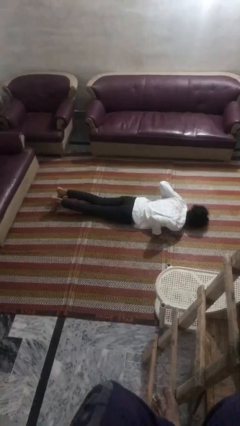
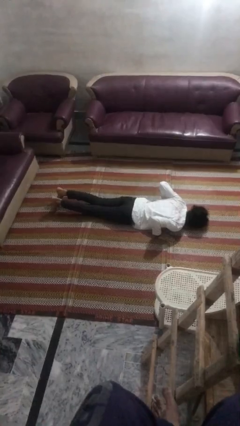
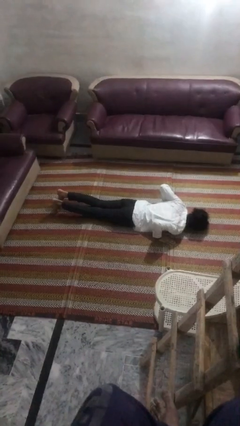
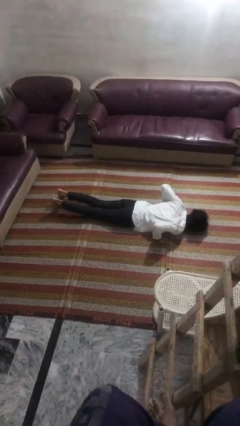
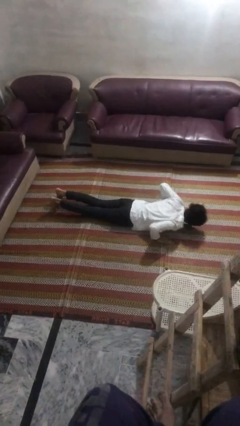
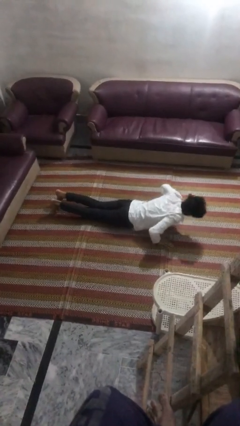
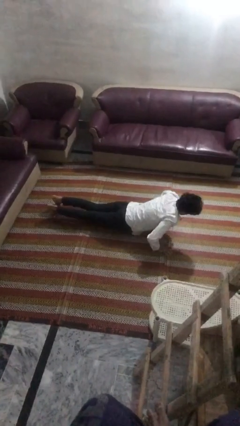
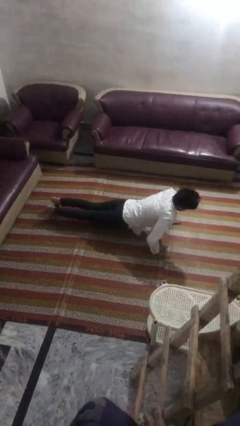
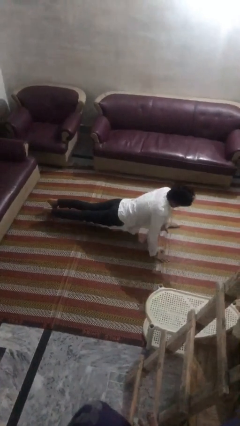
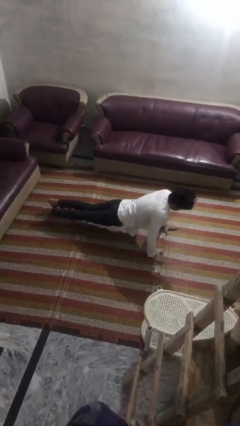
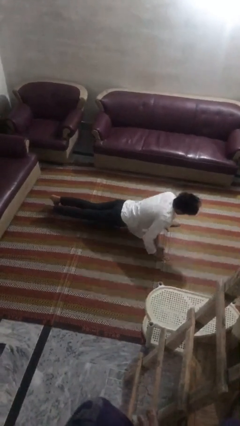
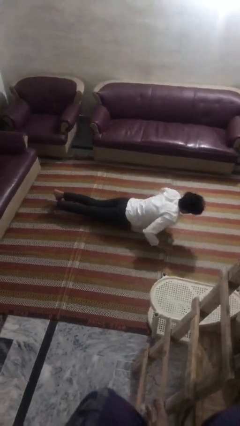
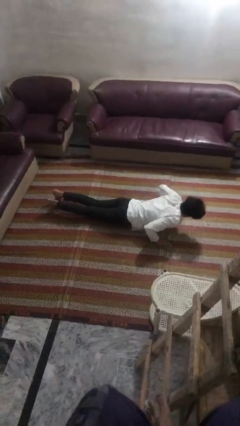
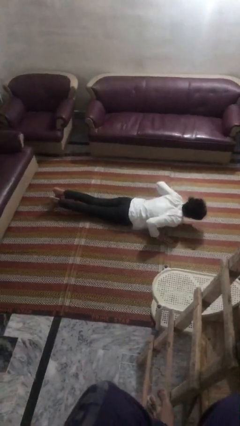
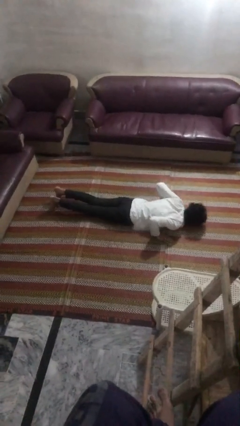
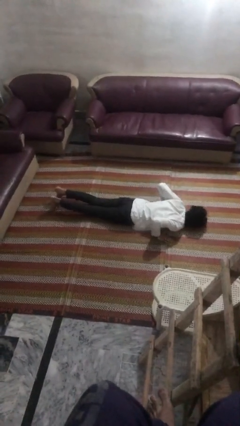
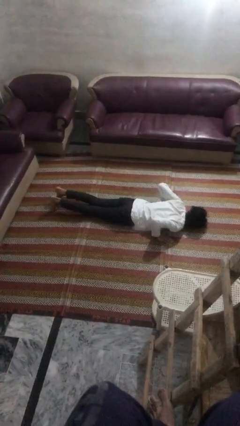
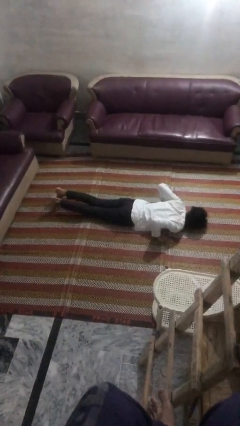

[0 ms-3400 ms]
person exercises with pushup

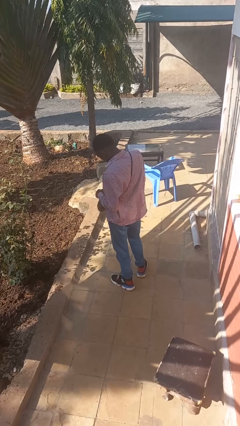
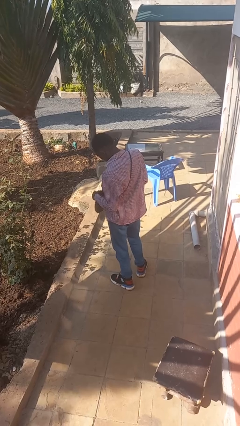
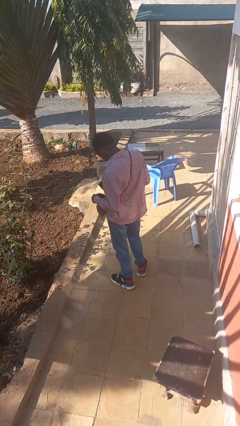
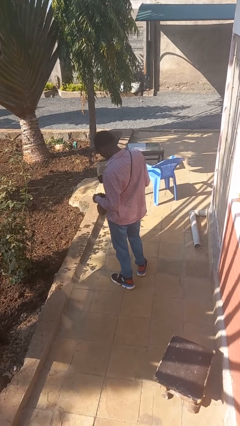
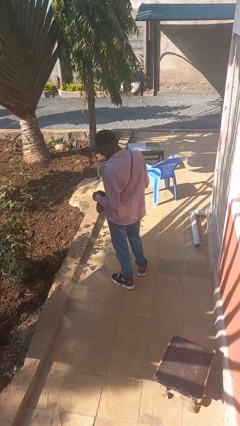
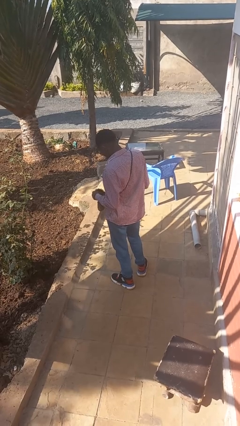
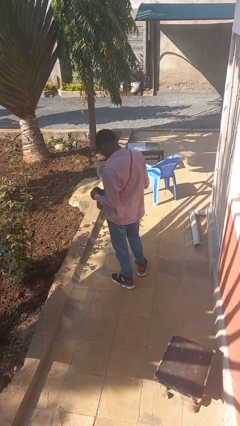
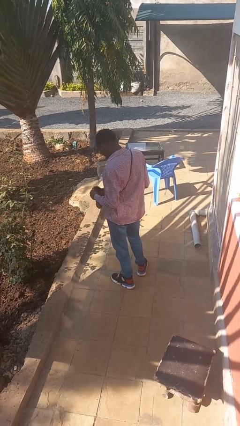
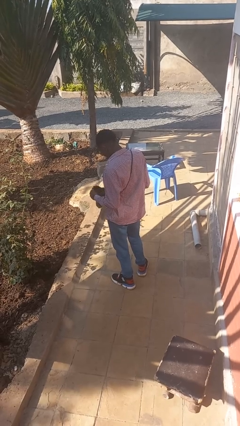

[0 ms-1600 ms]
person takes object from purse

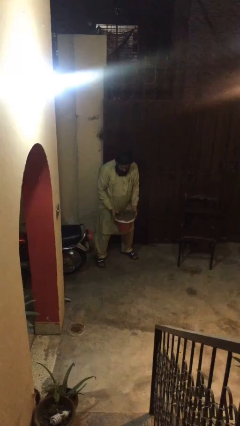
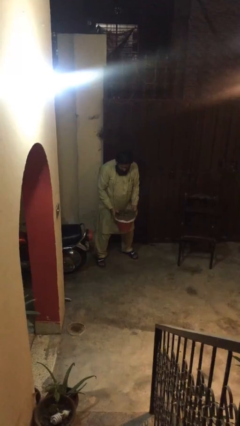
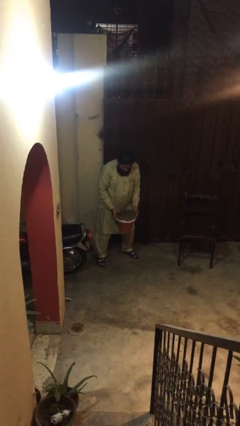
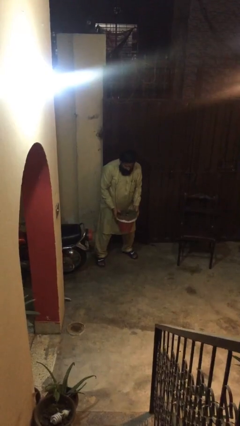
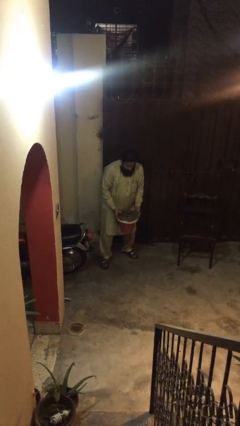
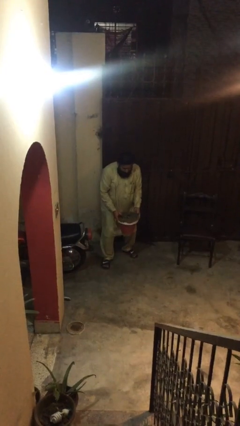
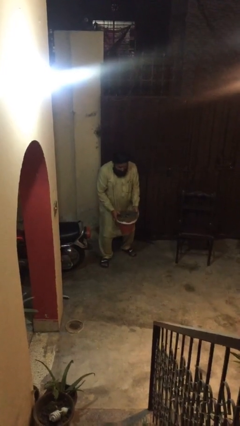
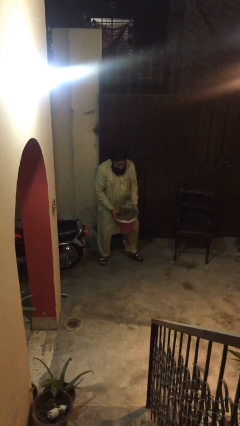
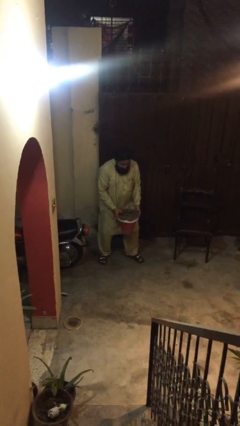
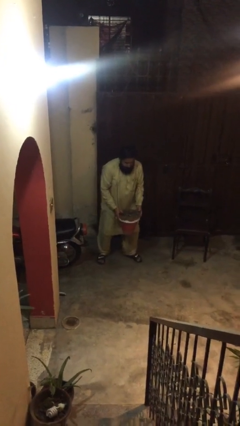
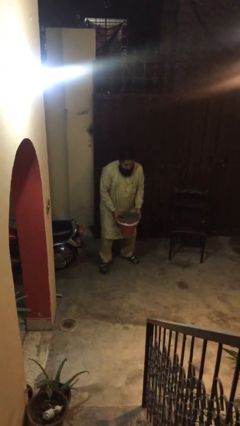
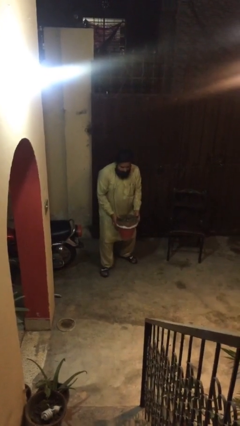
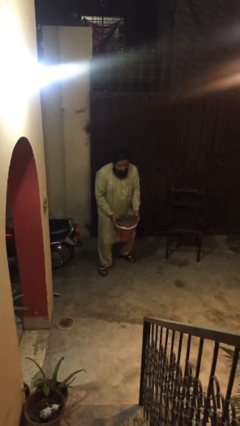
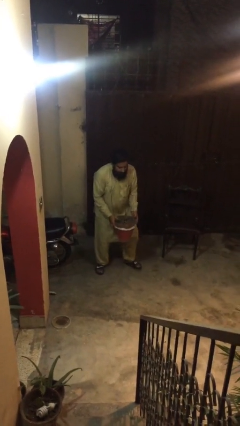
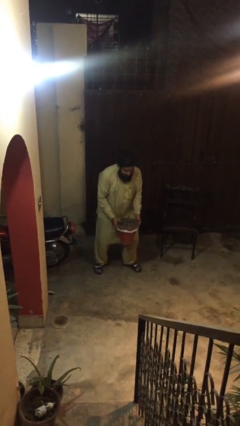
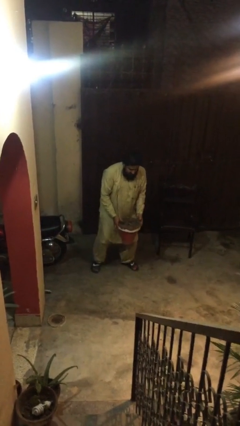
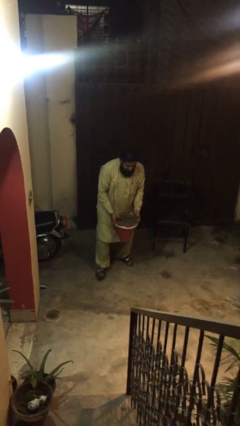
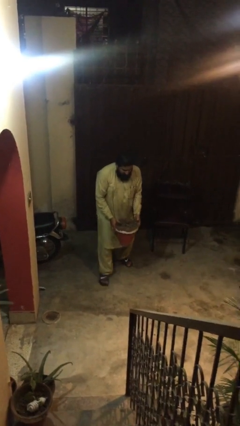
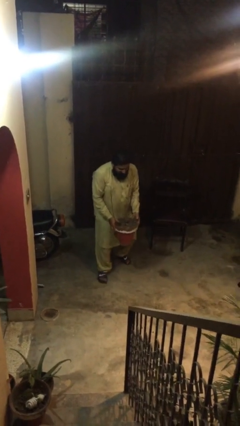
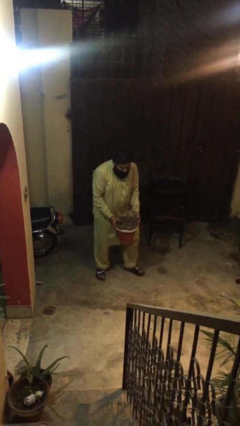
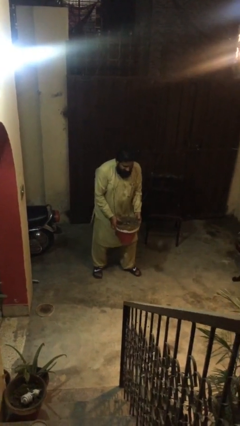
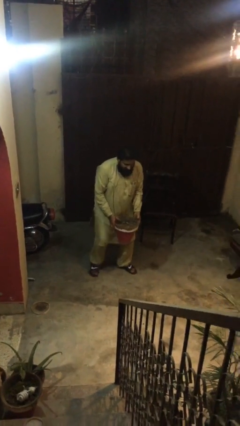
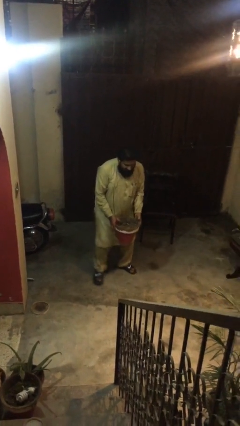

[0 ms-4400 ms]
person carries heavy object

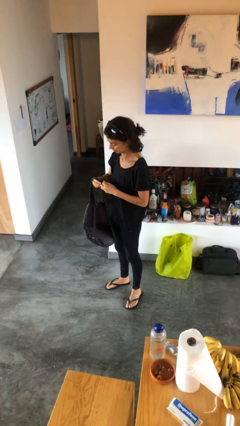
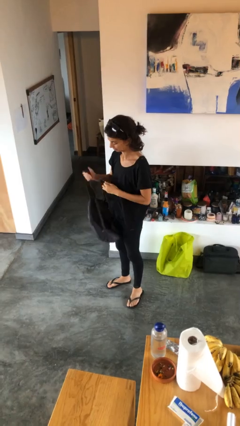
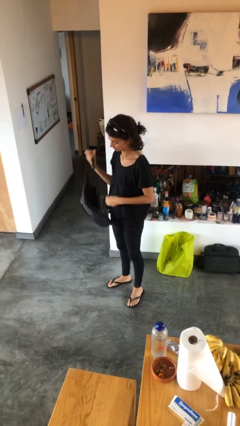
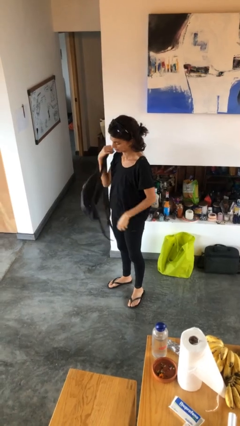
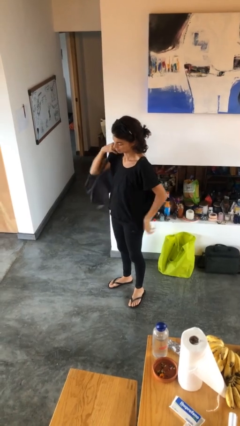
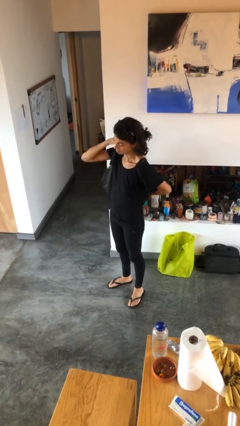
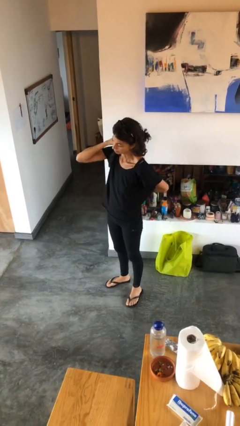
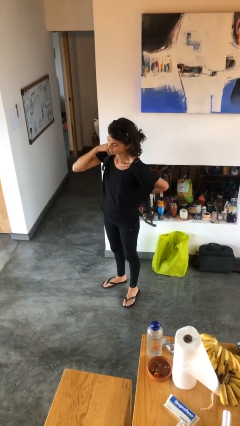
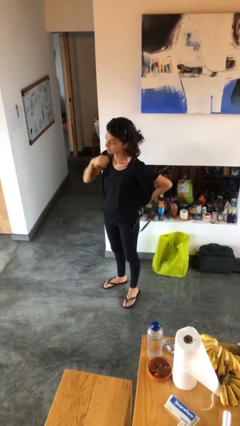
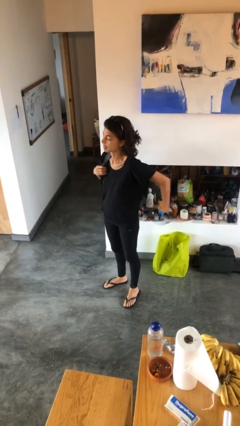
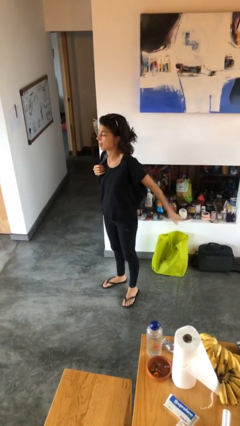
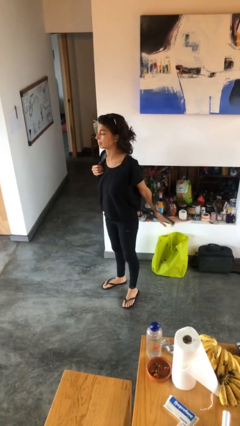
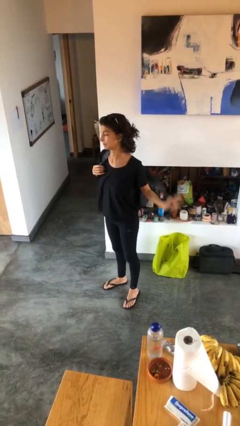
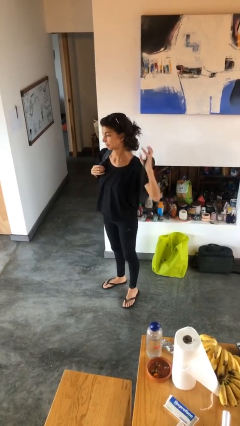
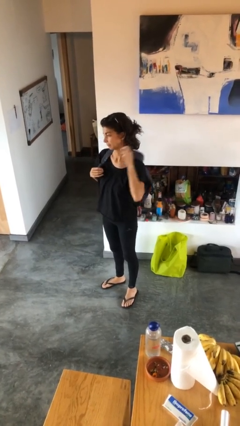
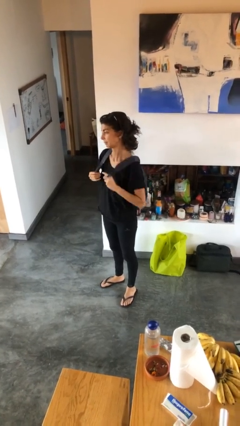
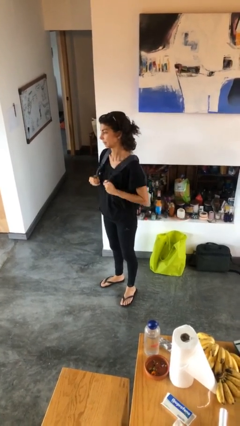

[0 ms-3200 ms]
person puts on backpack

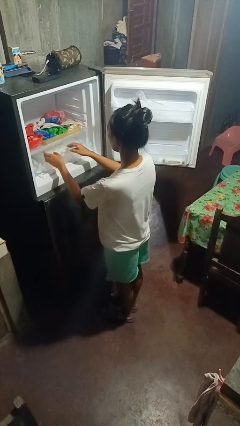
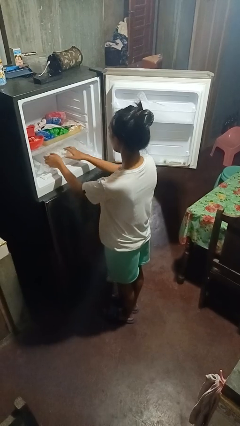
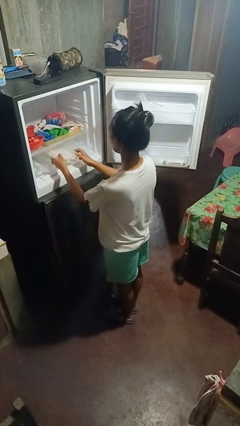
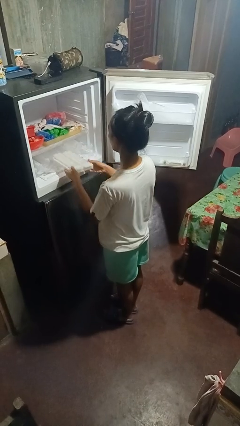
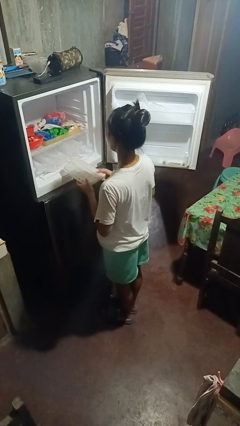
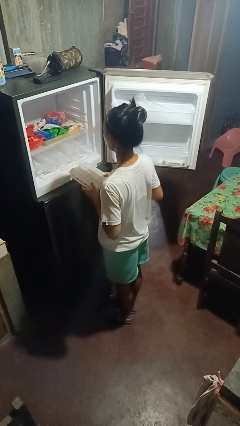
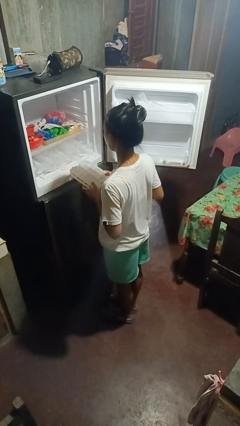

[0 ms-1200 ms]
person takes object from refrigerator

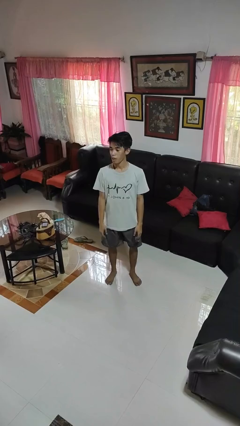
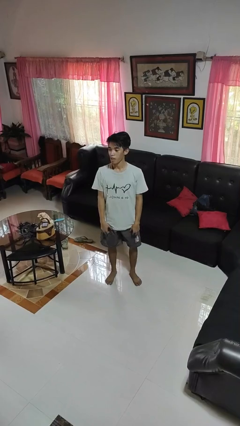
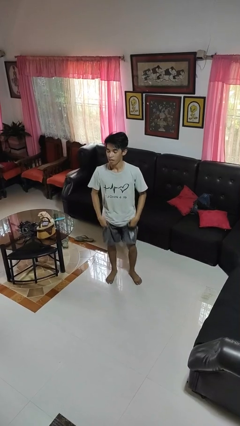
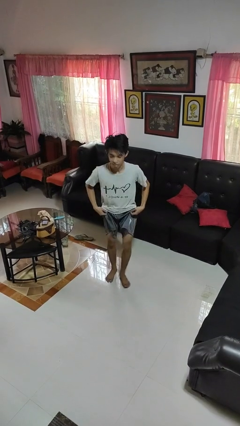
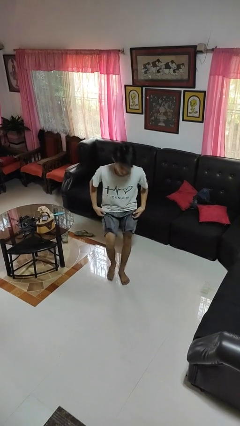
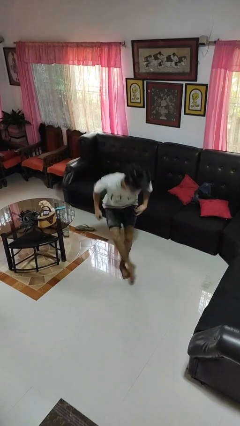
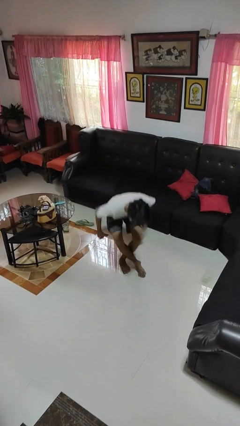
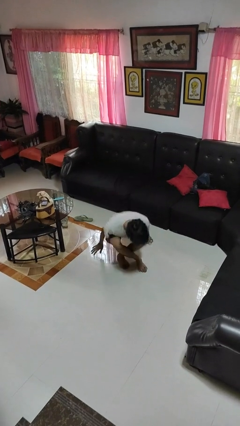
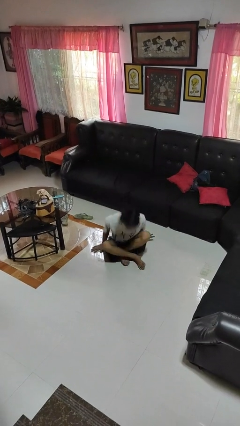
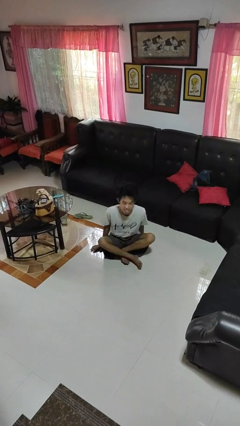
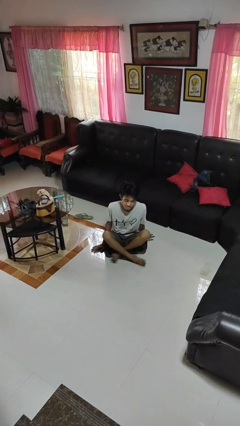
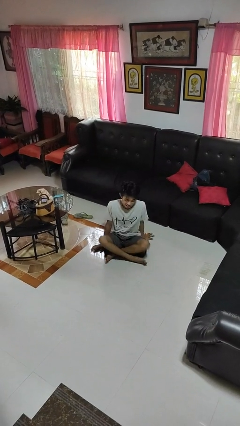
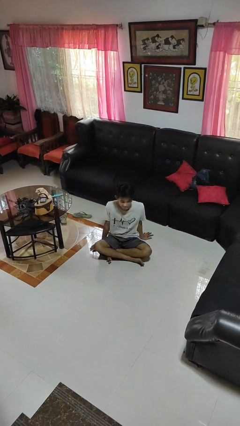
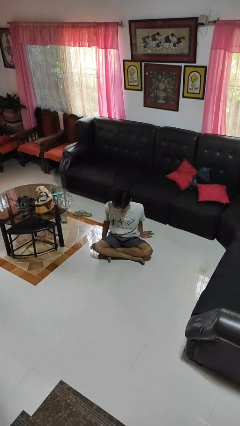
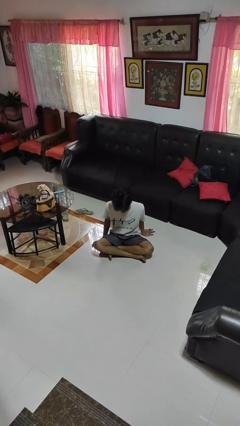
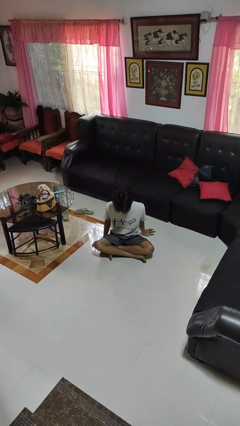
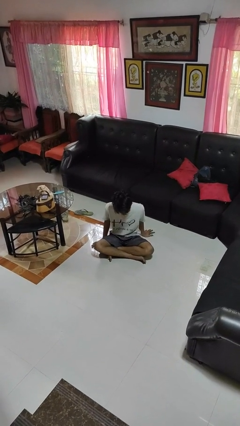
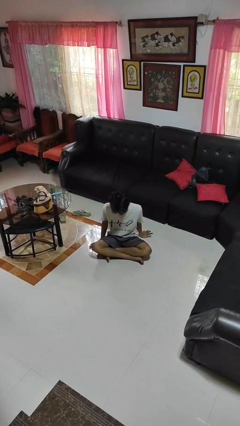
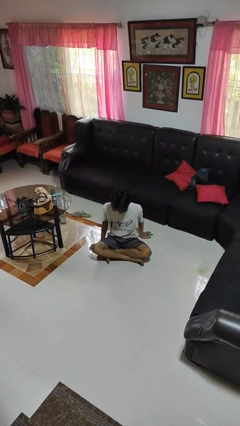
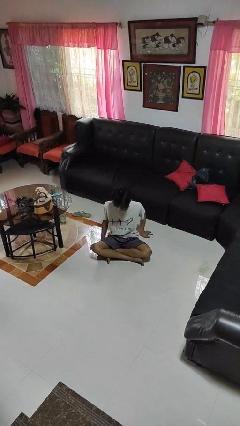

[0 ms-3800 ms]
person sits crisscross
